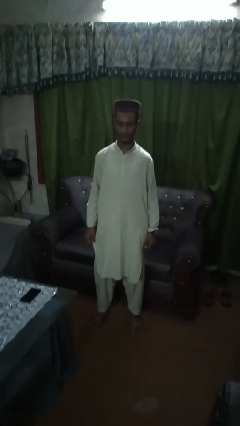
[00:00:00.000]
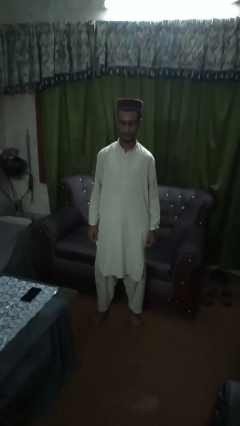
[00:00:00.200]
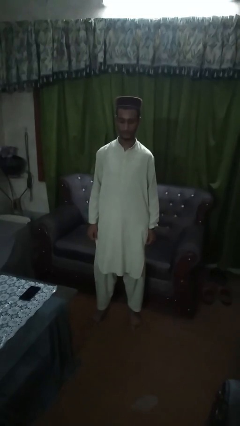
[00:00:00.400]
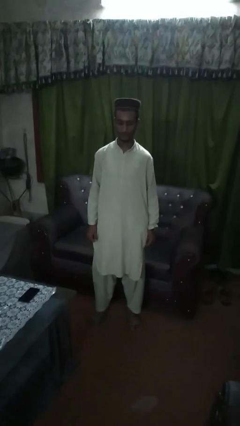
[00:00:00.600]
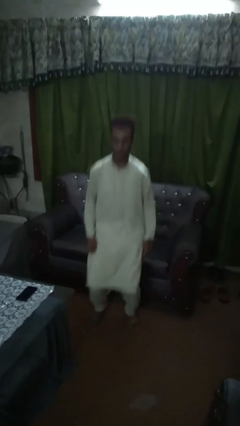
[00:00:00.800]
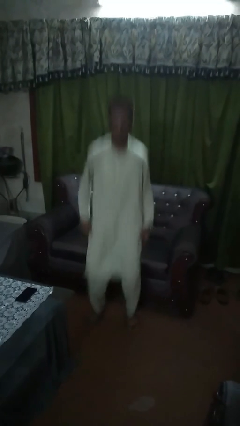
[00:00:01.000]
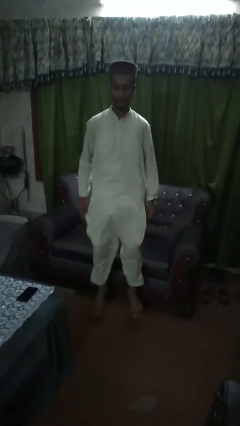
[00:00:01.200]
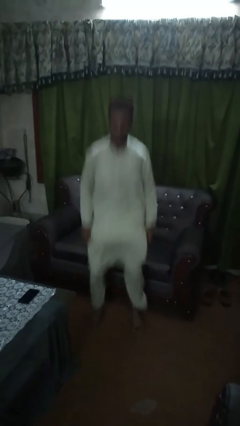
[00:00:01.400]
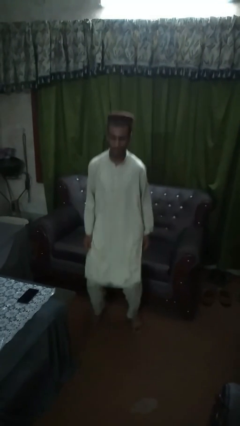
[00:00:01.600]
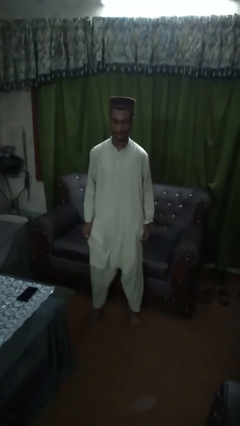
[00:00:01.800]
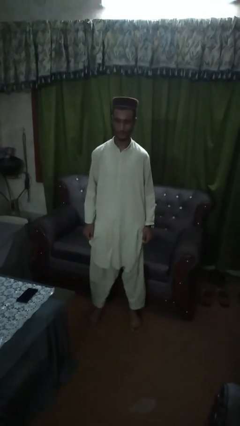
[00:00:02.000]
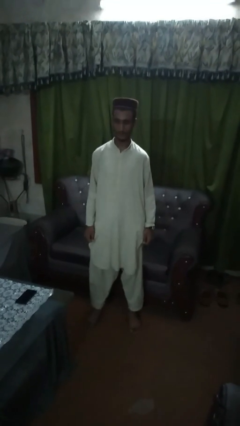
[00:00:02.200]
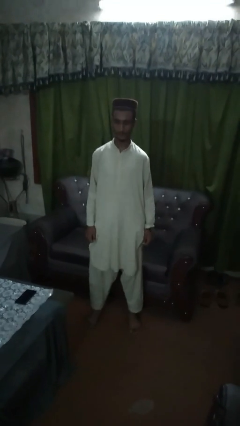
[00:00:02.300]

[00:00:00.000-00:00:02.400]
person jumps

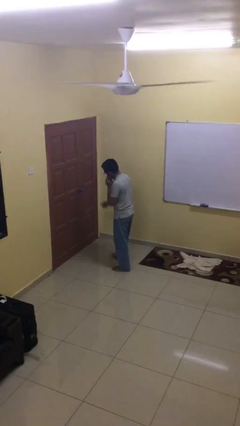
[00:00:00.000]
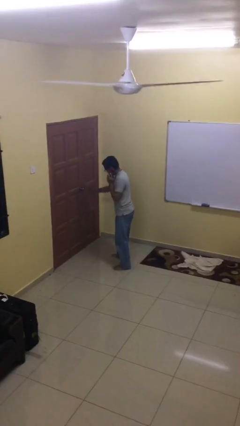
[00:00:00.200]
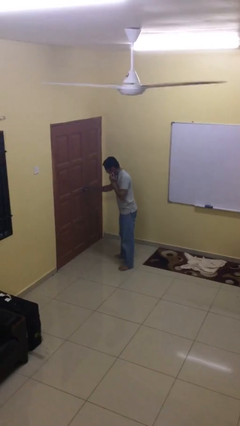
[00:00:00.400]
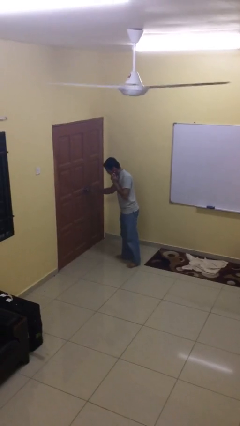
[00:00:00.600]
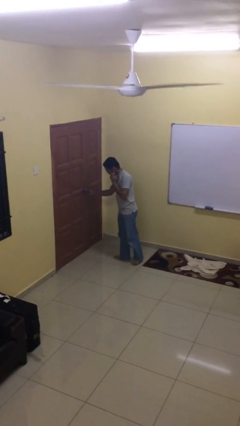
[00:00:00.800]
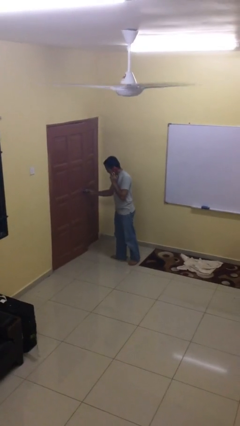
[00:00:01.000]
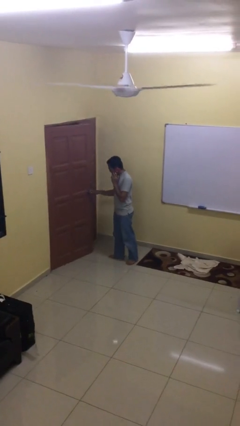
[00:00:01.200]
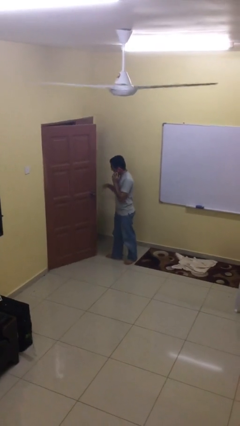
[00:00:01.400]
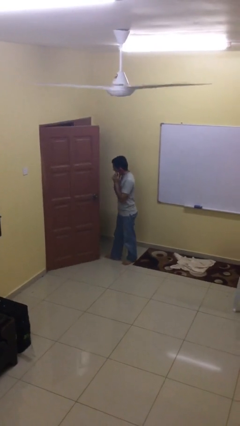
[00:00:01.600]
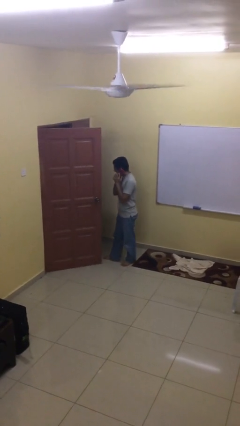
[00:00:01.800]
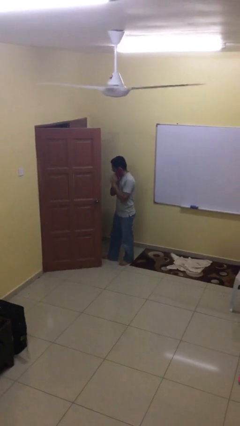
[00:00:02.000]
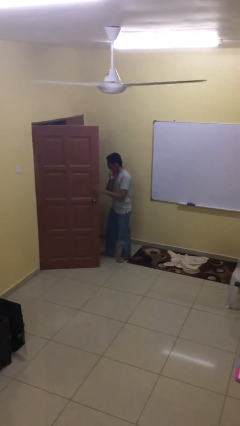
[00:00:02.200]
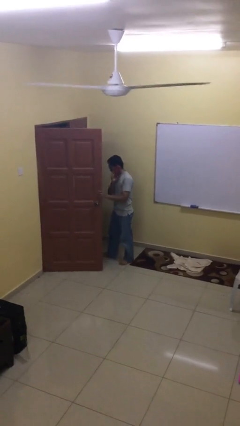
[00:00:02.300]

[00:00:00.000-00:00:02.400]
person opens facility door

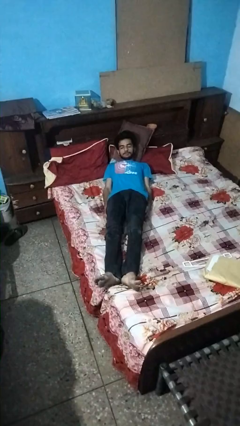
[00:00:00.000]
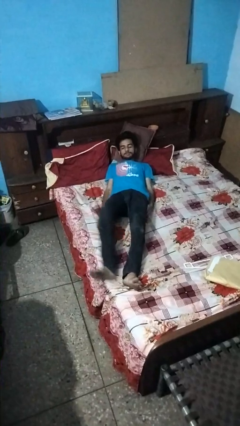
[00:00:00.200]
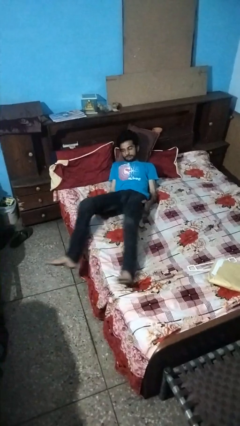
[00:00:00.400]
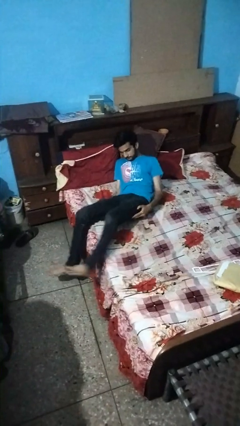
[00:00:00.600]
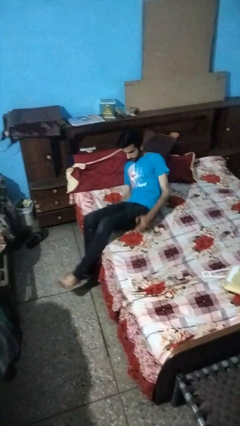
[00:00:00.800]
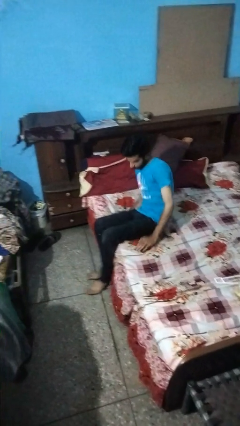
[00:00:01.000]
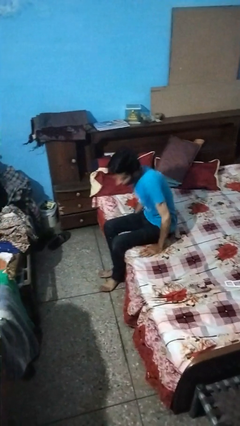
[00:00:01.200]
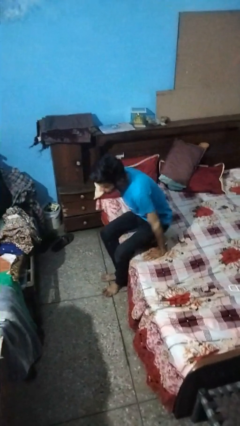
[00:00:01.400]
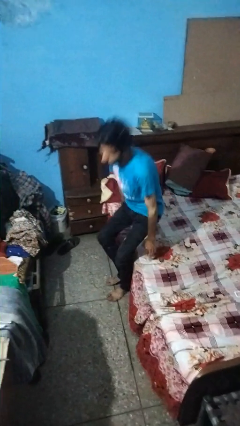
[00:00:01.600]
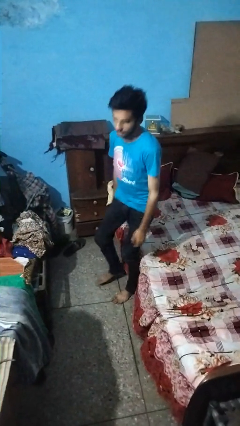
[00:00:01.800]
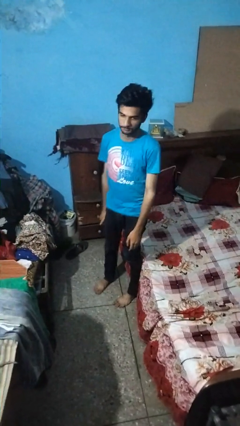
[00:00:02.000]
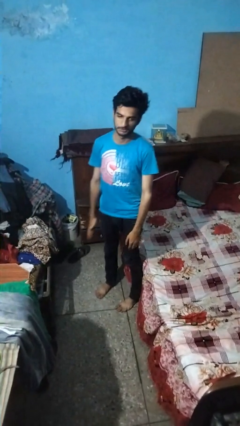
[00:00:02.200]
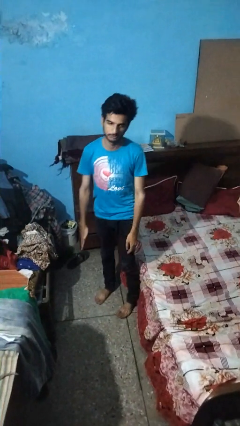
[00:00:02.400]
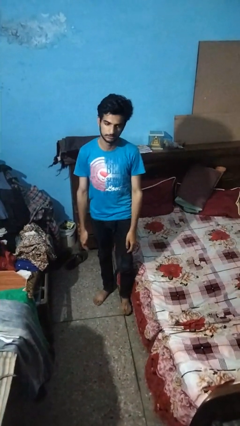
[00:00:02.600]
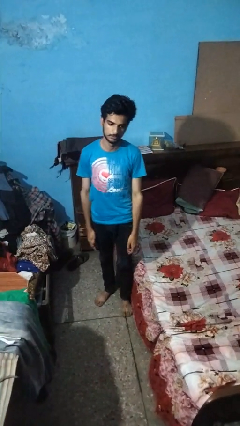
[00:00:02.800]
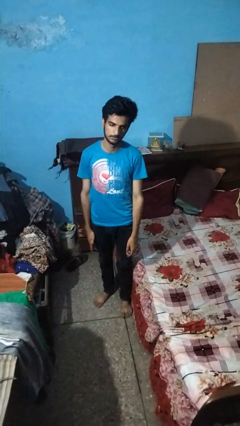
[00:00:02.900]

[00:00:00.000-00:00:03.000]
person stands up

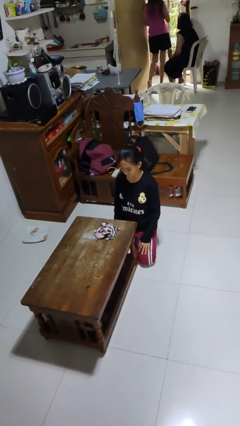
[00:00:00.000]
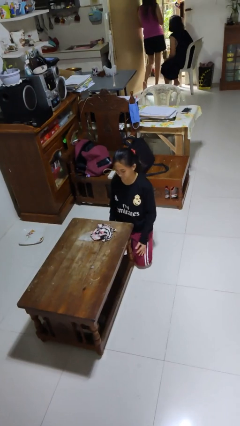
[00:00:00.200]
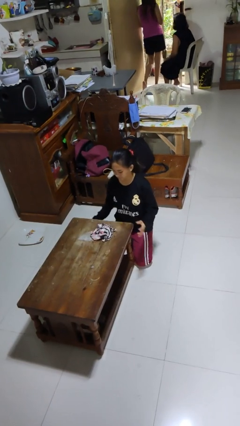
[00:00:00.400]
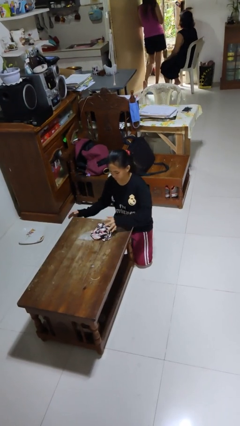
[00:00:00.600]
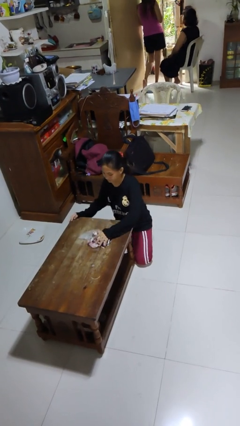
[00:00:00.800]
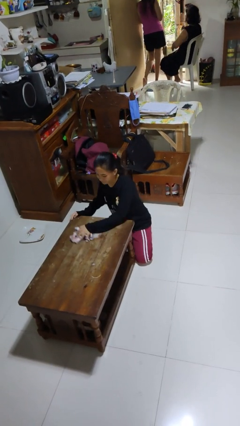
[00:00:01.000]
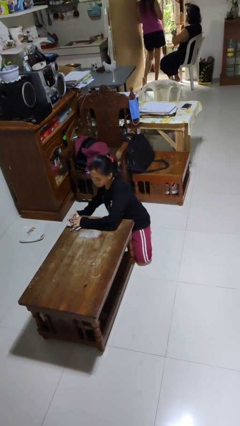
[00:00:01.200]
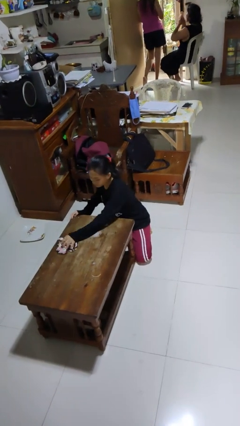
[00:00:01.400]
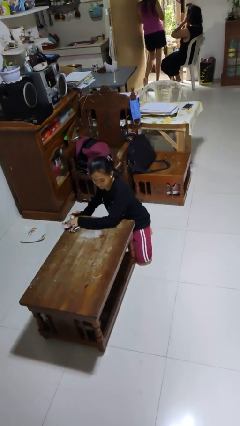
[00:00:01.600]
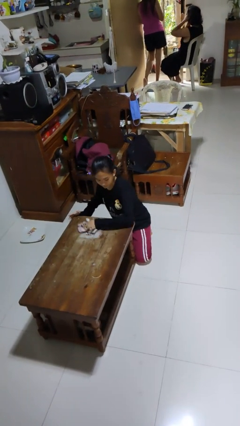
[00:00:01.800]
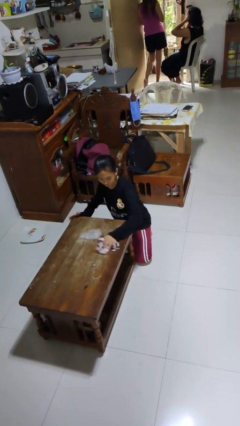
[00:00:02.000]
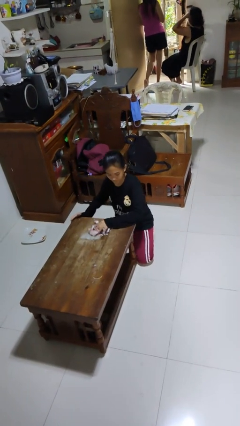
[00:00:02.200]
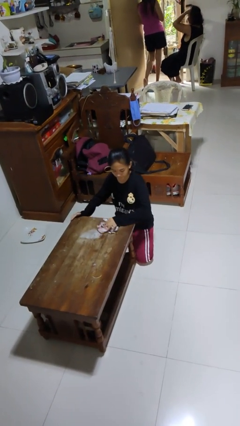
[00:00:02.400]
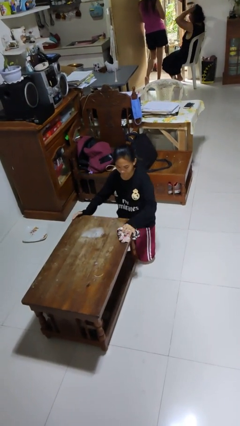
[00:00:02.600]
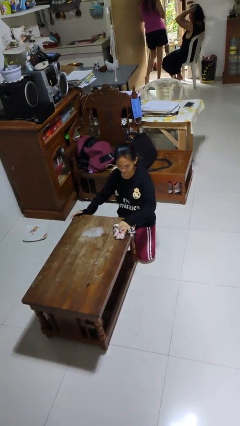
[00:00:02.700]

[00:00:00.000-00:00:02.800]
person cleans table with rag

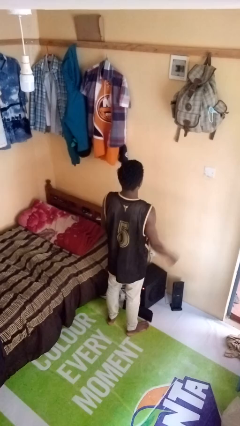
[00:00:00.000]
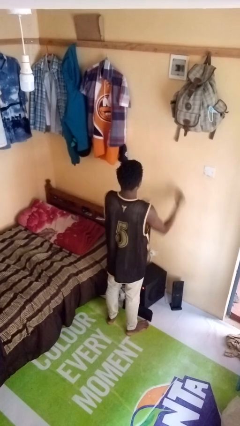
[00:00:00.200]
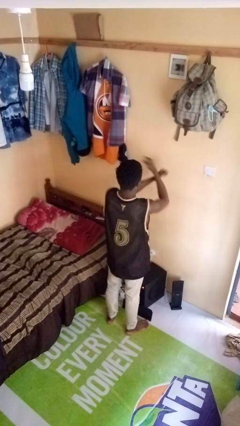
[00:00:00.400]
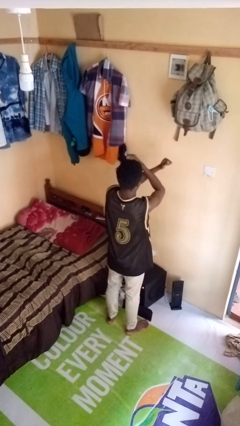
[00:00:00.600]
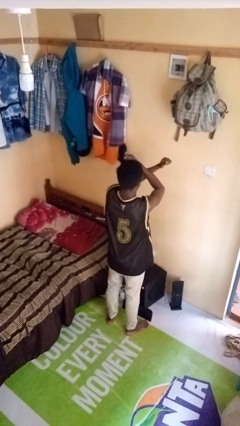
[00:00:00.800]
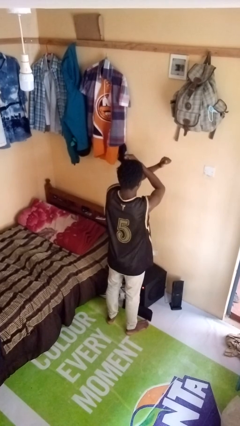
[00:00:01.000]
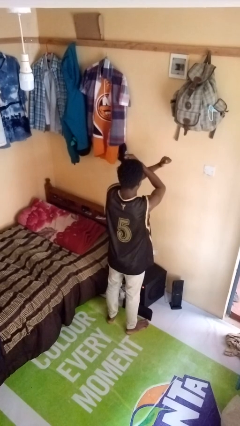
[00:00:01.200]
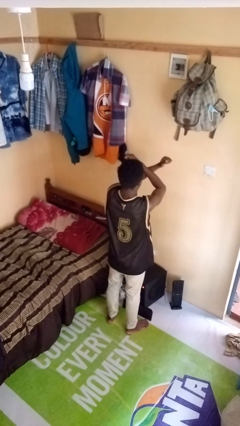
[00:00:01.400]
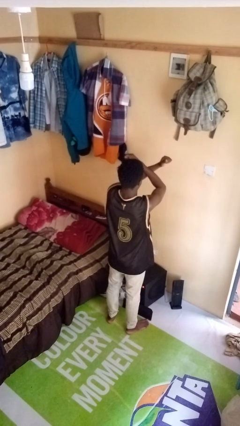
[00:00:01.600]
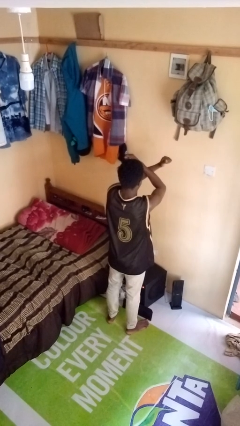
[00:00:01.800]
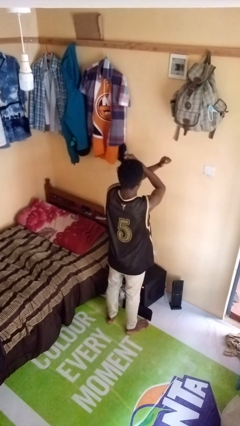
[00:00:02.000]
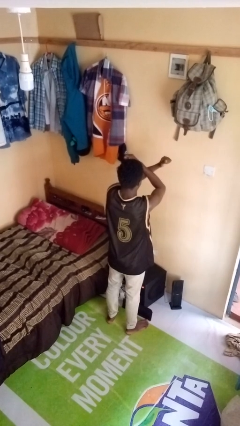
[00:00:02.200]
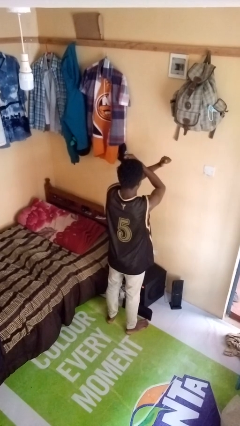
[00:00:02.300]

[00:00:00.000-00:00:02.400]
person gestures arms x

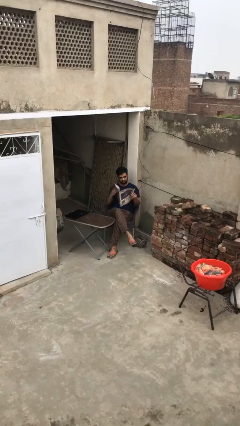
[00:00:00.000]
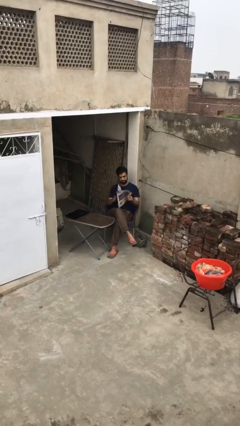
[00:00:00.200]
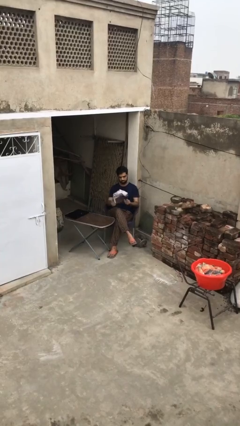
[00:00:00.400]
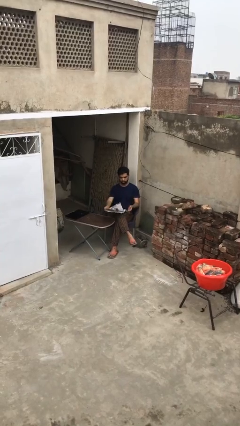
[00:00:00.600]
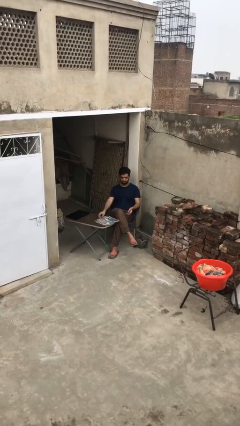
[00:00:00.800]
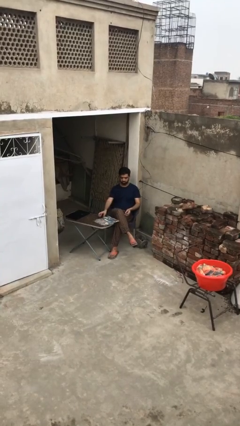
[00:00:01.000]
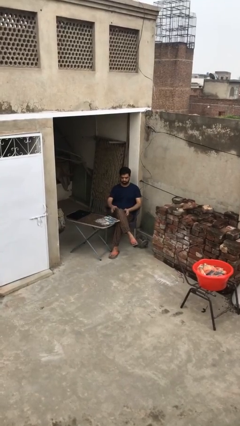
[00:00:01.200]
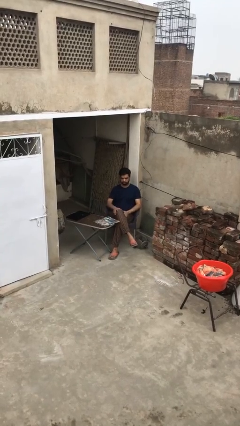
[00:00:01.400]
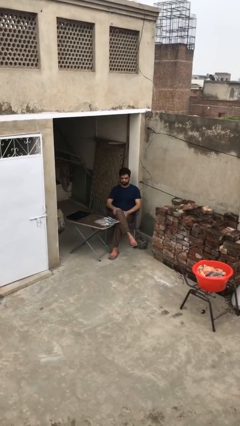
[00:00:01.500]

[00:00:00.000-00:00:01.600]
person puts down object on table

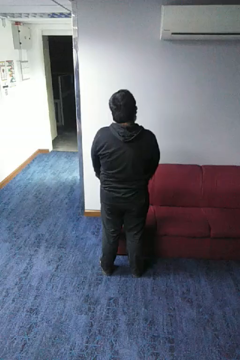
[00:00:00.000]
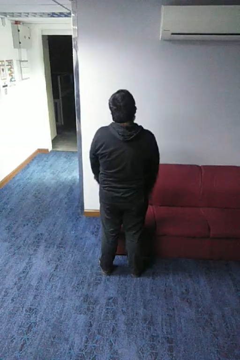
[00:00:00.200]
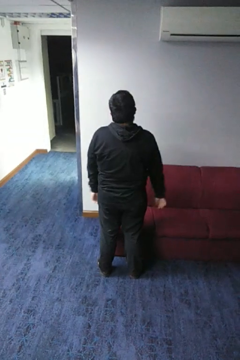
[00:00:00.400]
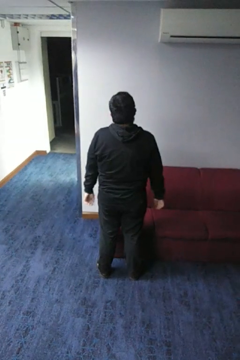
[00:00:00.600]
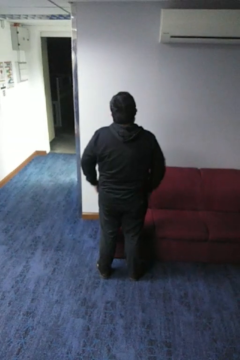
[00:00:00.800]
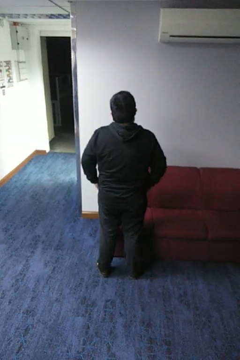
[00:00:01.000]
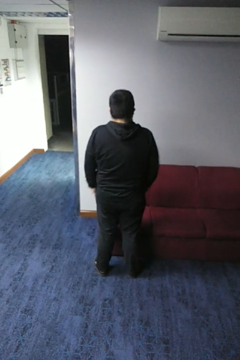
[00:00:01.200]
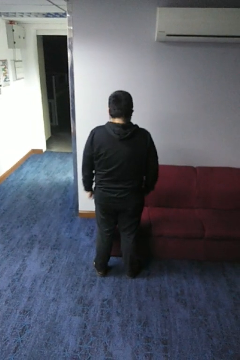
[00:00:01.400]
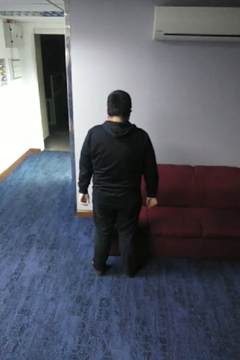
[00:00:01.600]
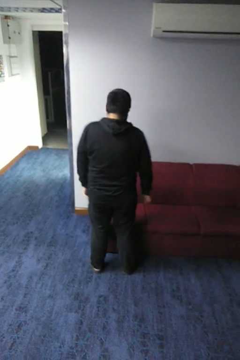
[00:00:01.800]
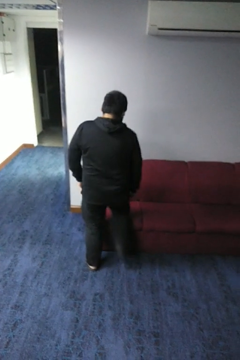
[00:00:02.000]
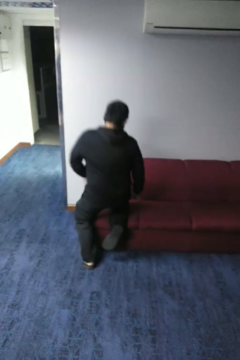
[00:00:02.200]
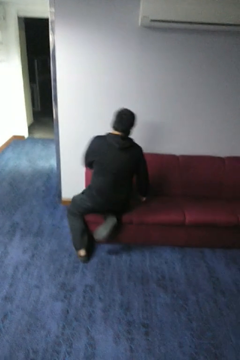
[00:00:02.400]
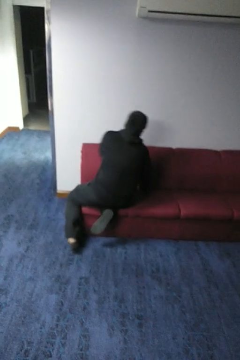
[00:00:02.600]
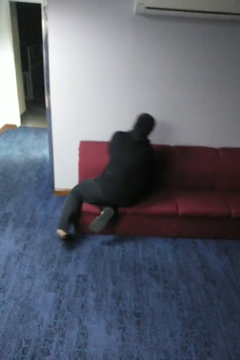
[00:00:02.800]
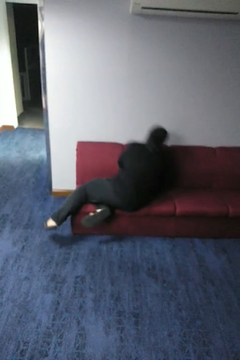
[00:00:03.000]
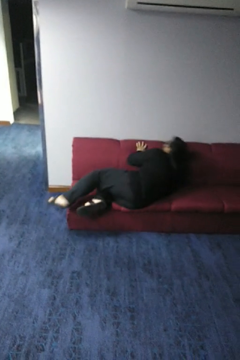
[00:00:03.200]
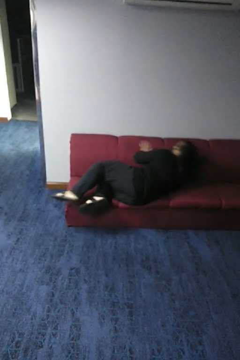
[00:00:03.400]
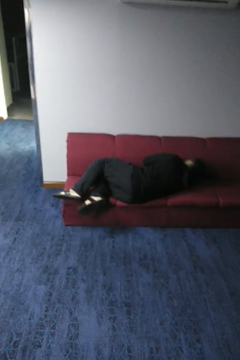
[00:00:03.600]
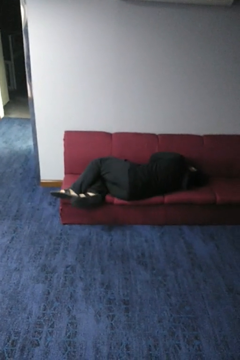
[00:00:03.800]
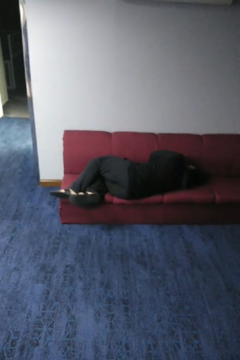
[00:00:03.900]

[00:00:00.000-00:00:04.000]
person lies down on couch
